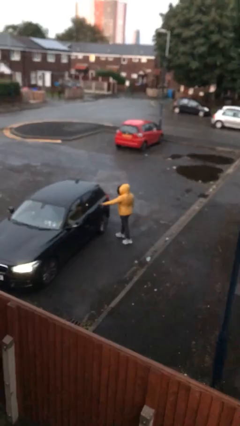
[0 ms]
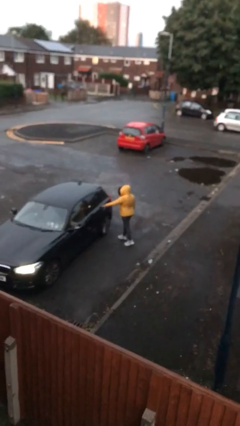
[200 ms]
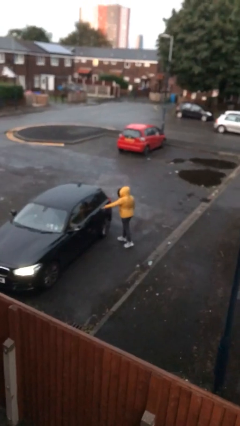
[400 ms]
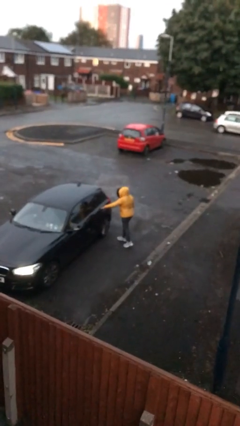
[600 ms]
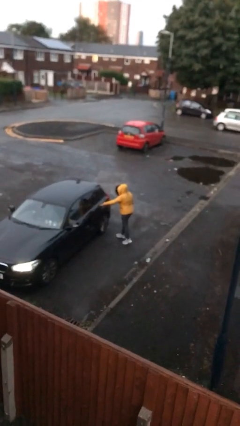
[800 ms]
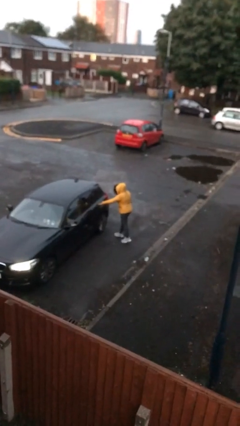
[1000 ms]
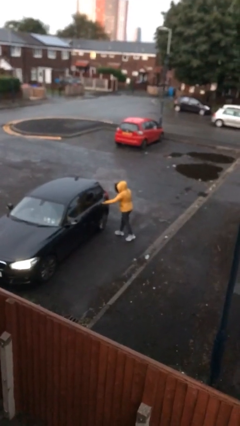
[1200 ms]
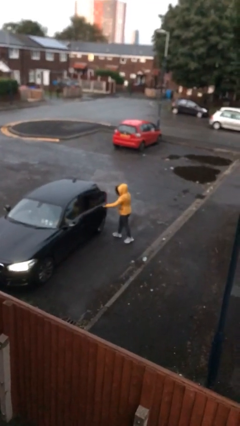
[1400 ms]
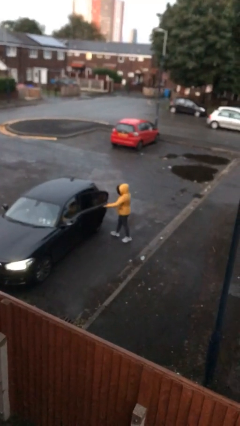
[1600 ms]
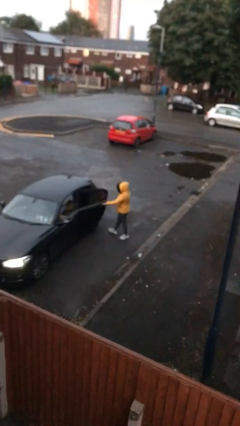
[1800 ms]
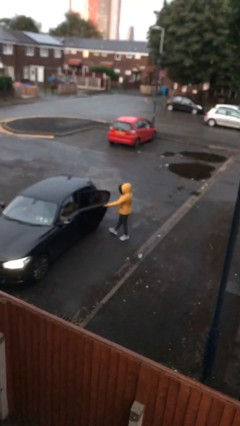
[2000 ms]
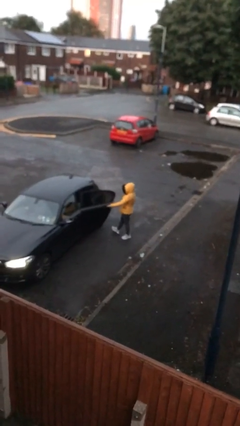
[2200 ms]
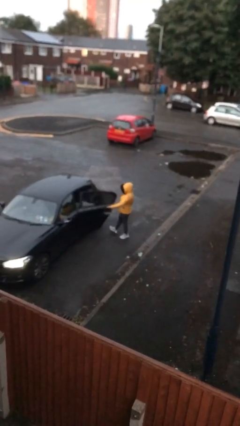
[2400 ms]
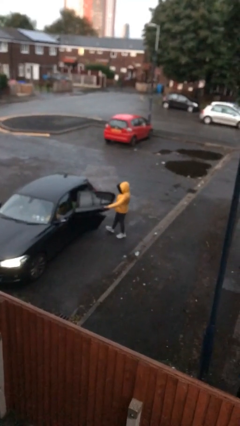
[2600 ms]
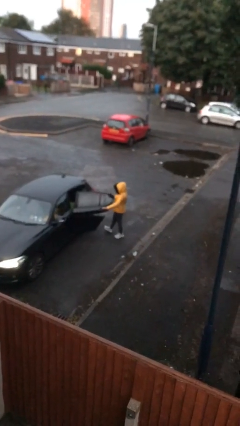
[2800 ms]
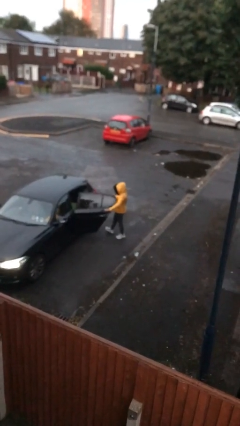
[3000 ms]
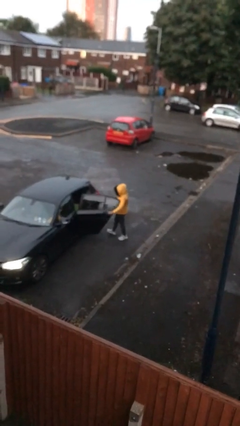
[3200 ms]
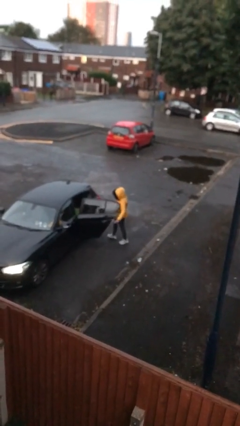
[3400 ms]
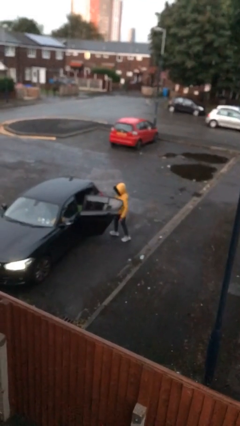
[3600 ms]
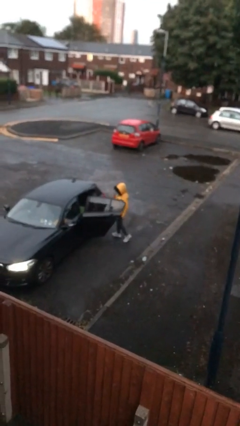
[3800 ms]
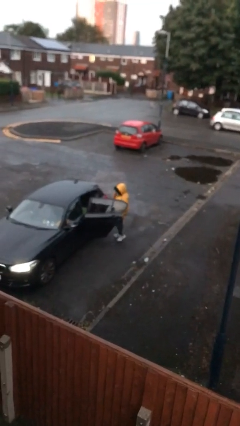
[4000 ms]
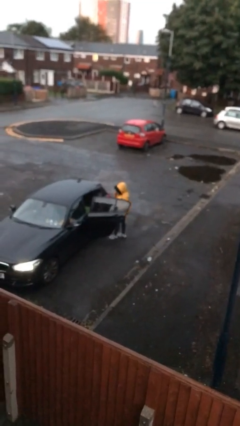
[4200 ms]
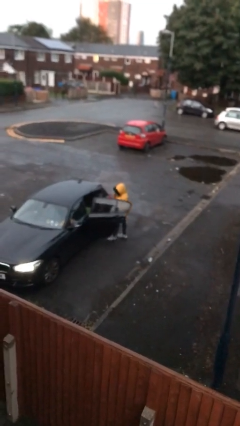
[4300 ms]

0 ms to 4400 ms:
person opens car door

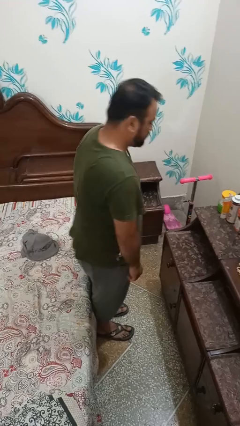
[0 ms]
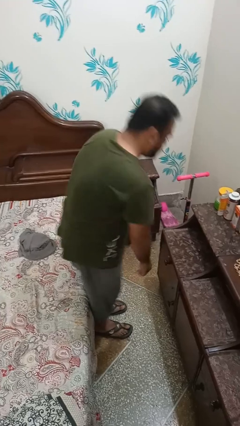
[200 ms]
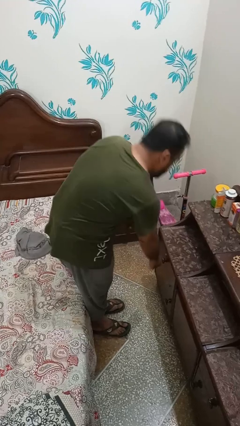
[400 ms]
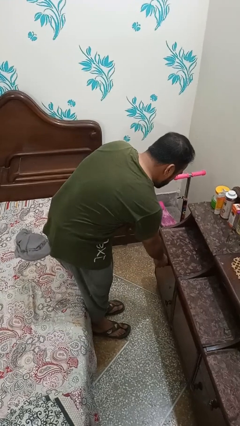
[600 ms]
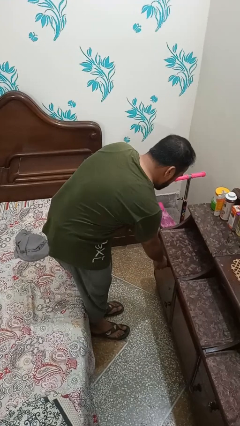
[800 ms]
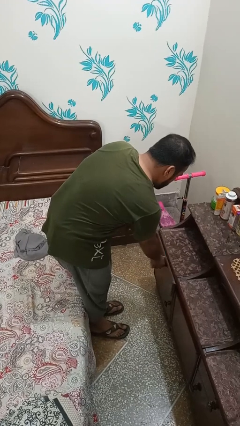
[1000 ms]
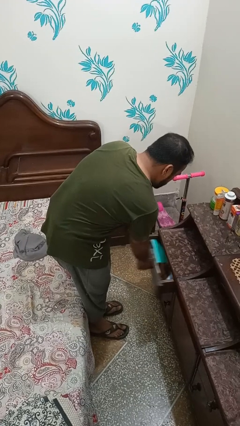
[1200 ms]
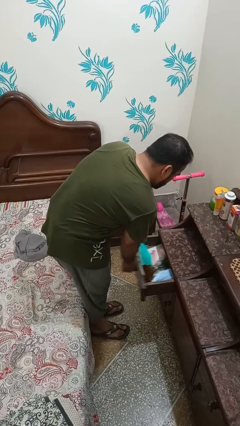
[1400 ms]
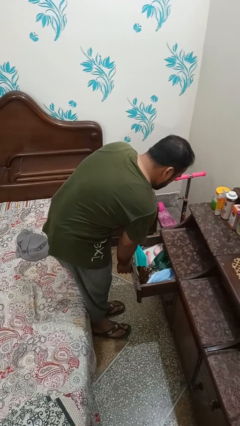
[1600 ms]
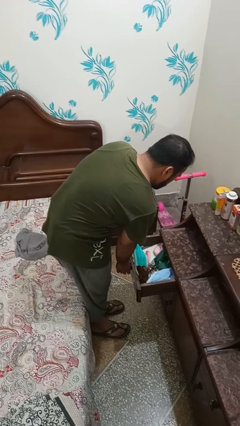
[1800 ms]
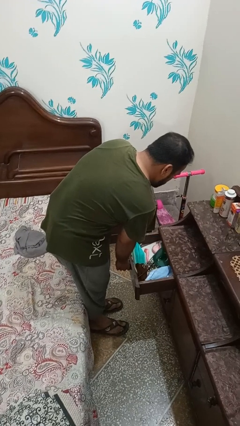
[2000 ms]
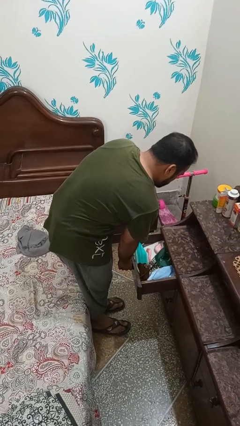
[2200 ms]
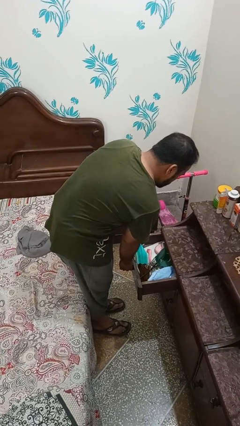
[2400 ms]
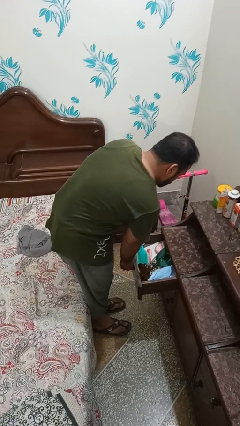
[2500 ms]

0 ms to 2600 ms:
person opens dresser drawer

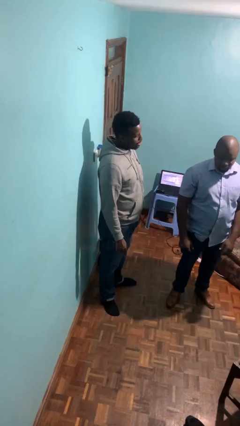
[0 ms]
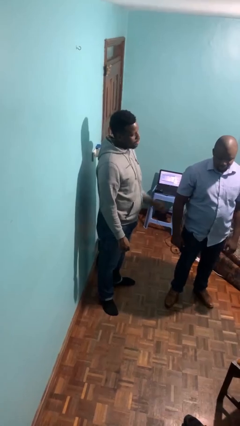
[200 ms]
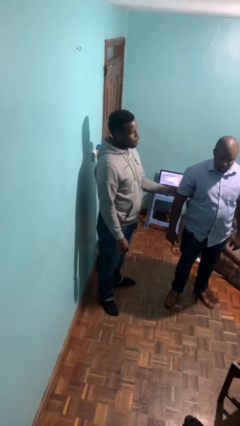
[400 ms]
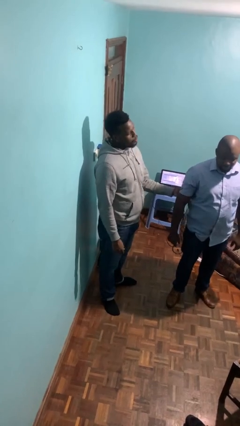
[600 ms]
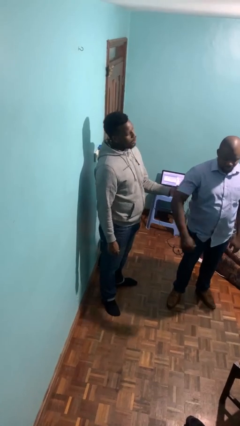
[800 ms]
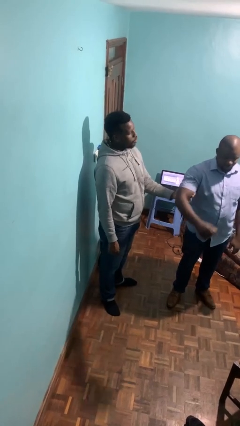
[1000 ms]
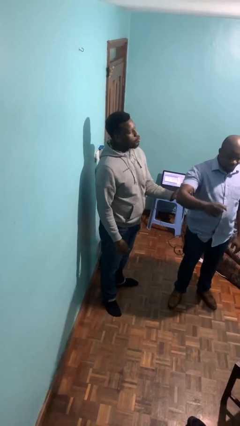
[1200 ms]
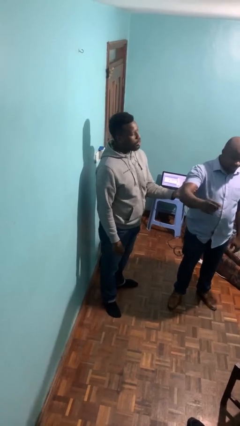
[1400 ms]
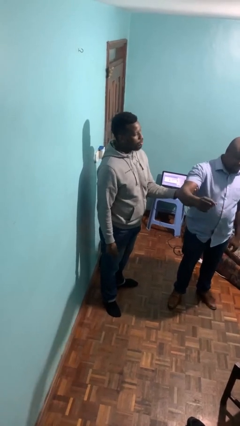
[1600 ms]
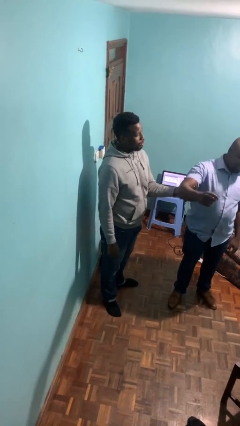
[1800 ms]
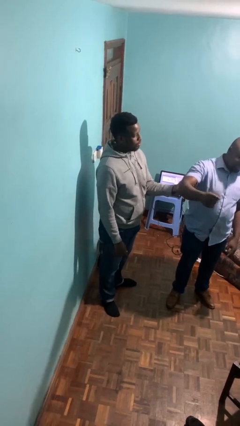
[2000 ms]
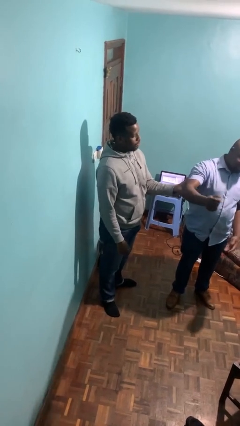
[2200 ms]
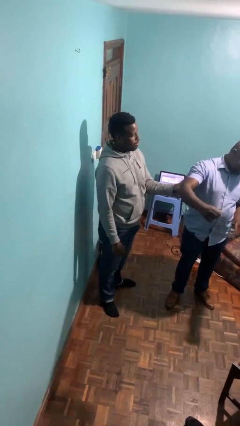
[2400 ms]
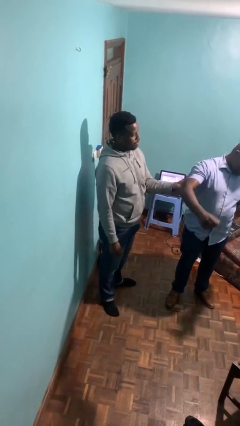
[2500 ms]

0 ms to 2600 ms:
person grabs person by forearm

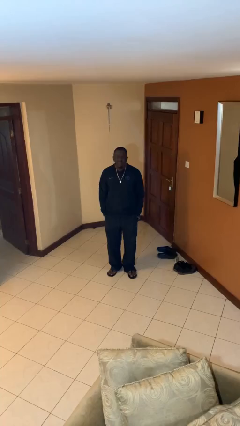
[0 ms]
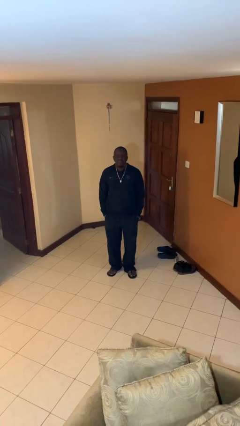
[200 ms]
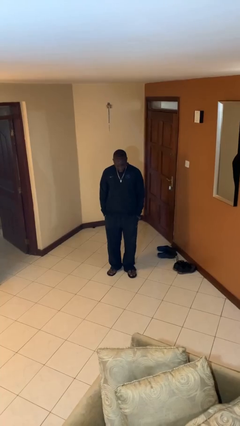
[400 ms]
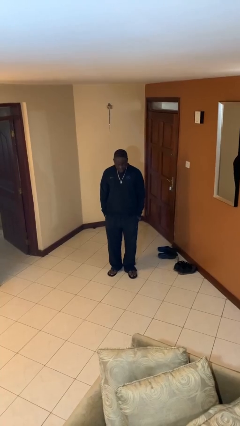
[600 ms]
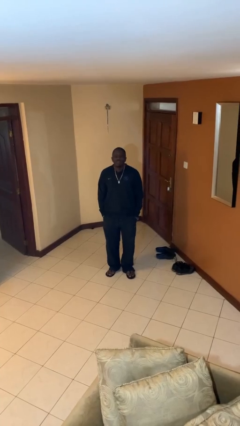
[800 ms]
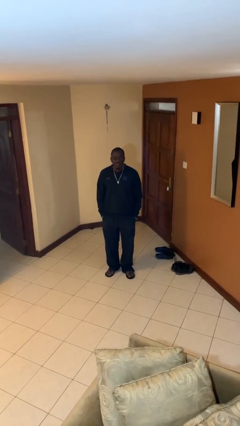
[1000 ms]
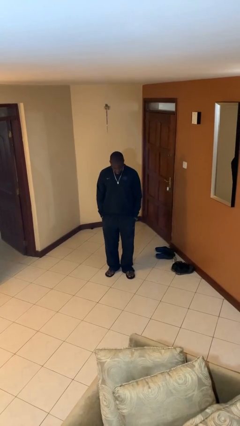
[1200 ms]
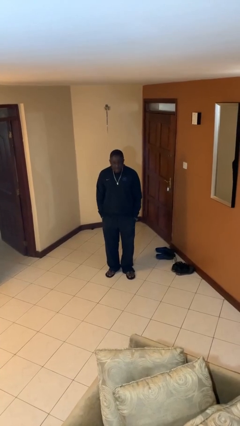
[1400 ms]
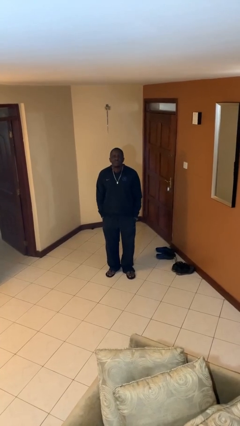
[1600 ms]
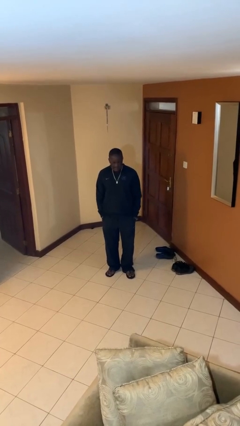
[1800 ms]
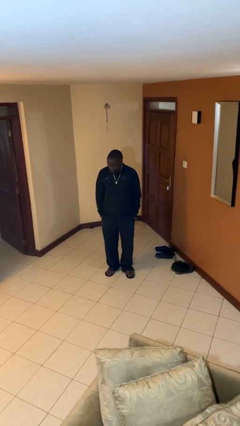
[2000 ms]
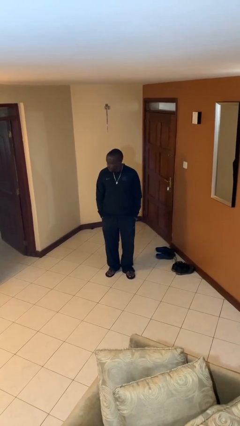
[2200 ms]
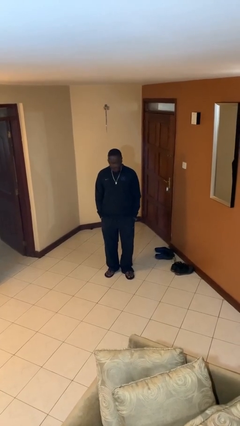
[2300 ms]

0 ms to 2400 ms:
person nods head

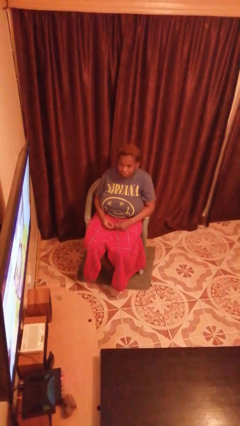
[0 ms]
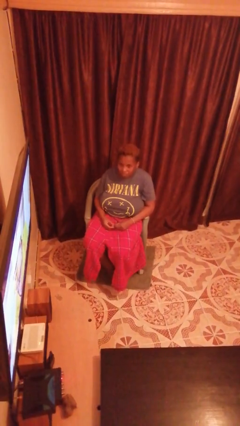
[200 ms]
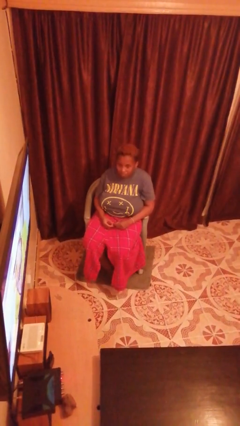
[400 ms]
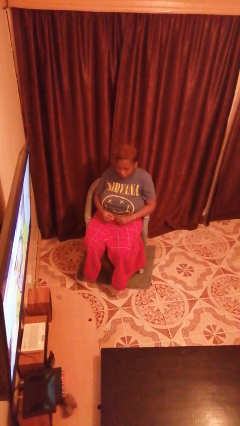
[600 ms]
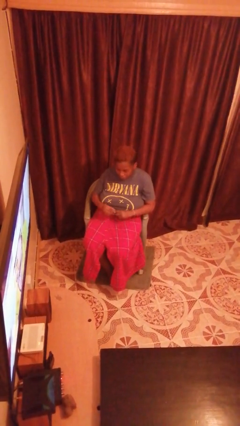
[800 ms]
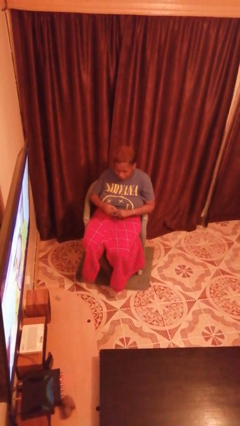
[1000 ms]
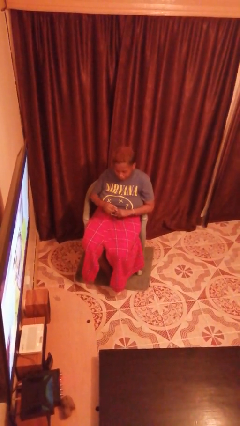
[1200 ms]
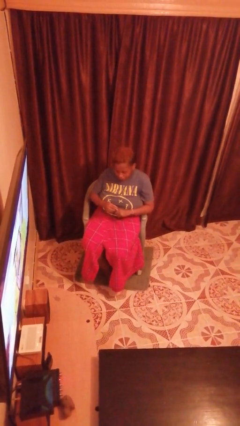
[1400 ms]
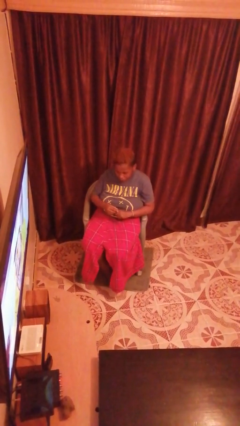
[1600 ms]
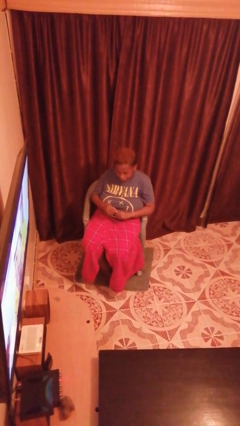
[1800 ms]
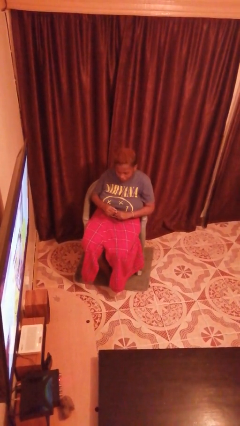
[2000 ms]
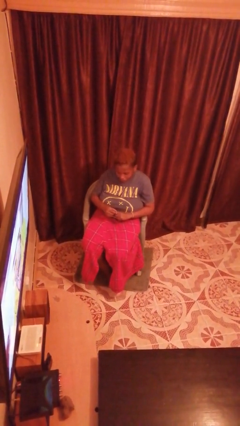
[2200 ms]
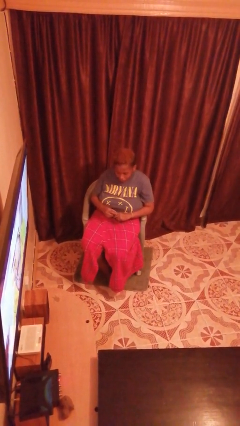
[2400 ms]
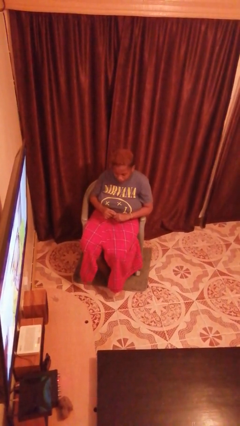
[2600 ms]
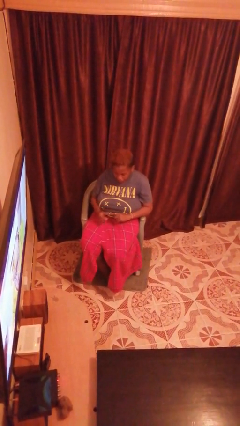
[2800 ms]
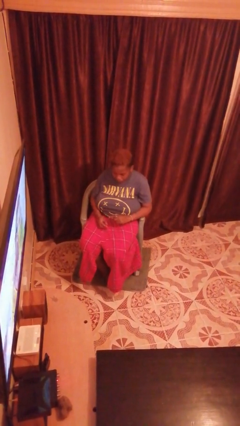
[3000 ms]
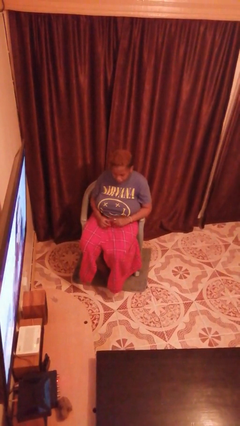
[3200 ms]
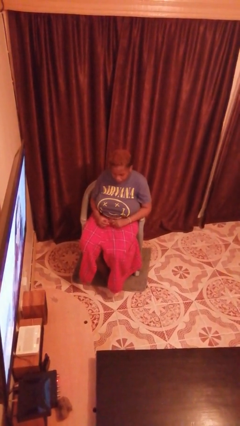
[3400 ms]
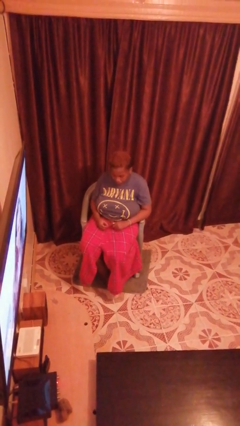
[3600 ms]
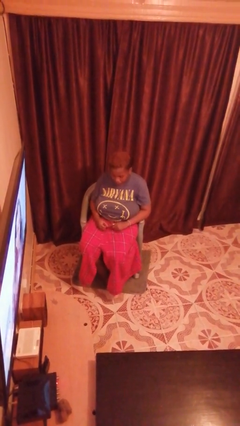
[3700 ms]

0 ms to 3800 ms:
person puts on ring

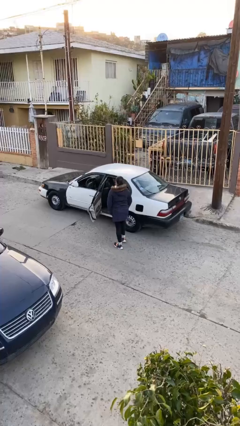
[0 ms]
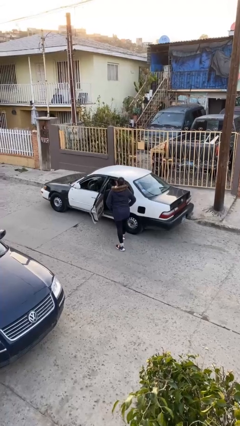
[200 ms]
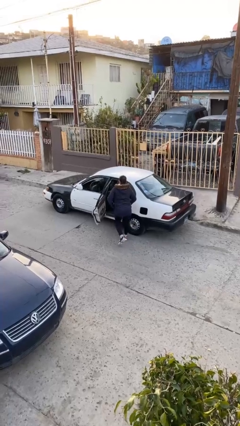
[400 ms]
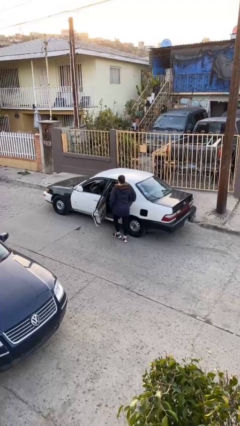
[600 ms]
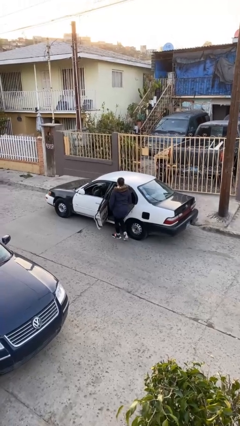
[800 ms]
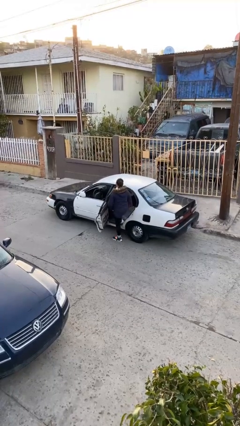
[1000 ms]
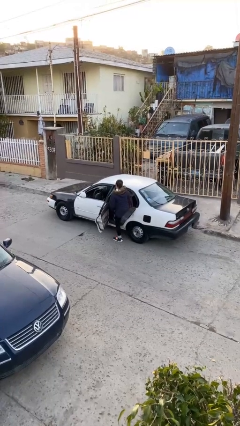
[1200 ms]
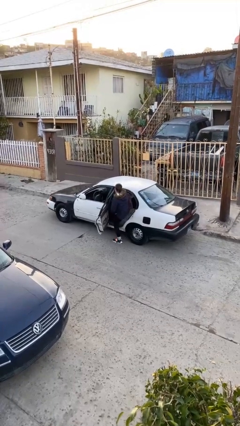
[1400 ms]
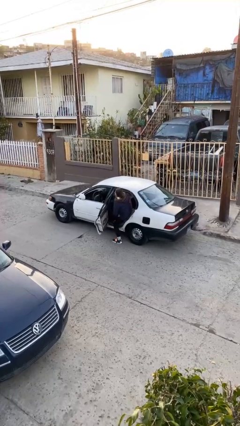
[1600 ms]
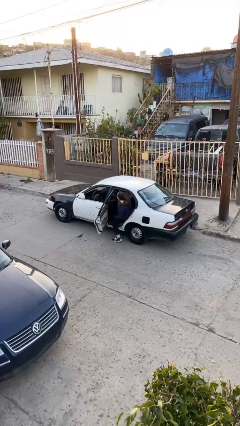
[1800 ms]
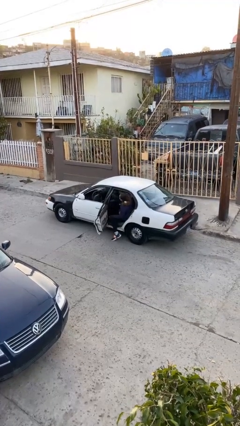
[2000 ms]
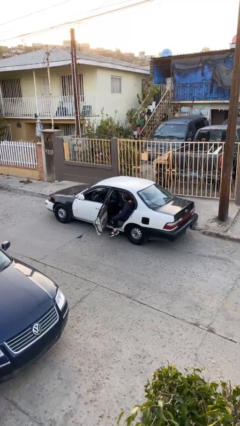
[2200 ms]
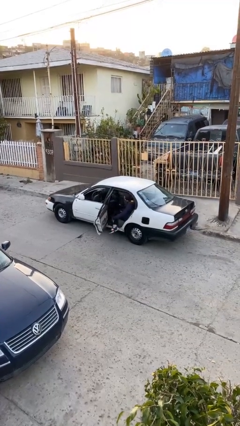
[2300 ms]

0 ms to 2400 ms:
person enters car
